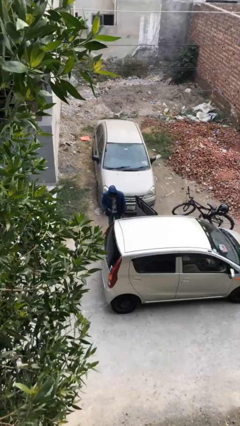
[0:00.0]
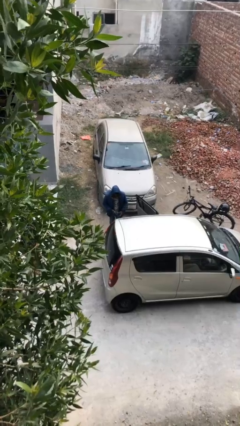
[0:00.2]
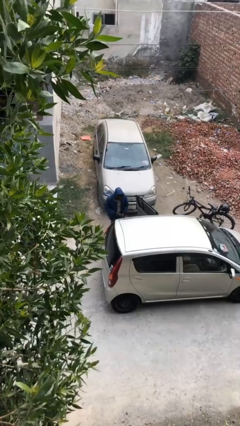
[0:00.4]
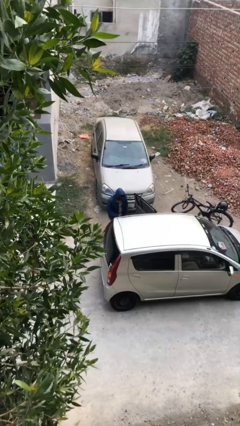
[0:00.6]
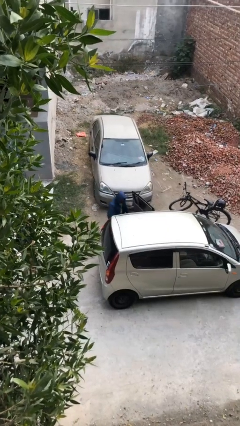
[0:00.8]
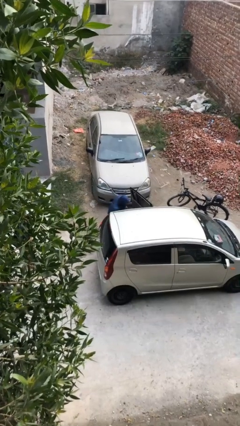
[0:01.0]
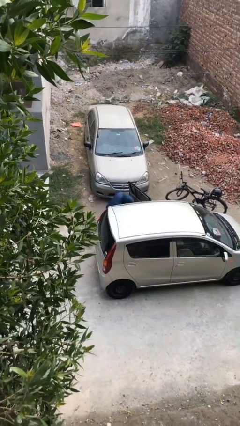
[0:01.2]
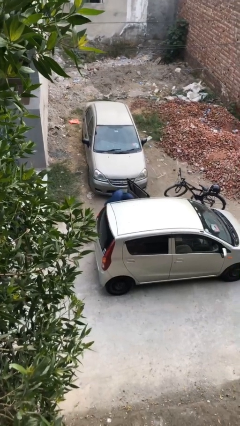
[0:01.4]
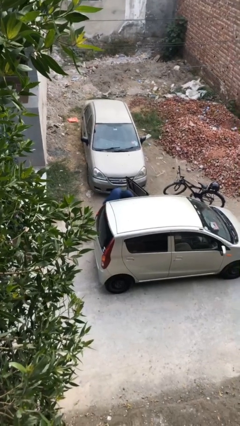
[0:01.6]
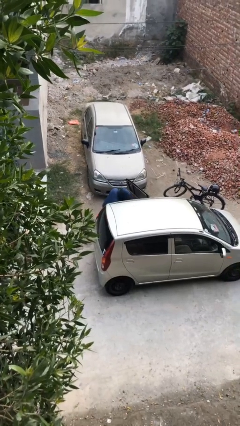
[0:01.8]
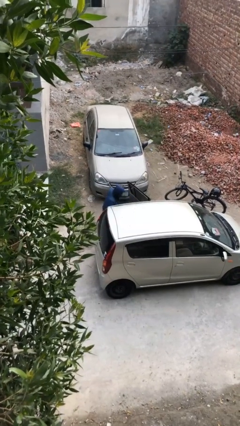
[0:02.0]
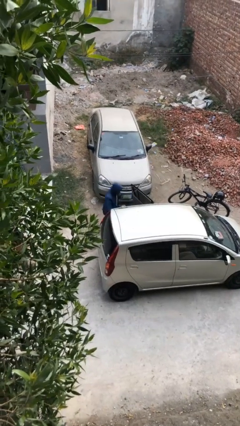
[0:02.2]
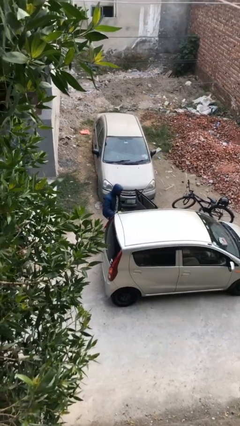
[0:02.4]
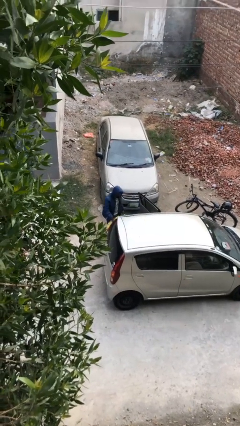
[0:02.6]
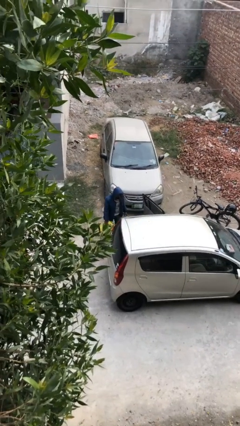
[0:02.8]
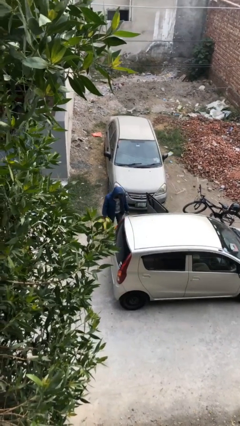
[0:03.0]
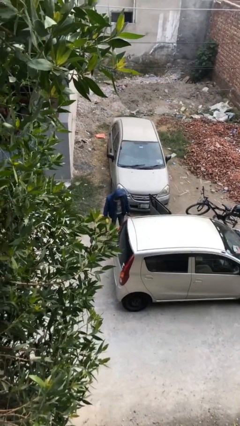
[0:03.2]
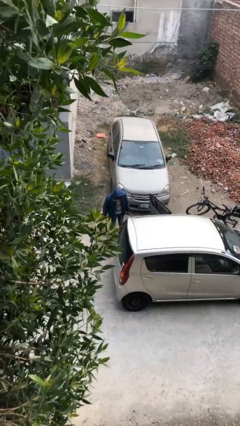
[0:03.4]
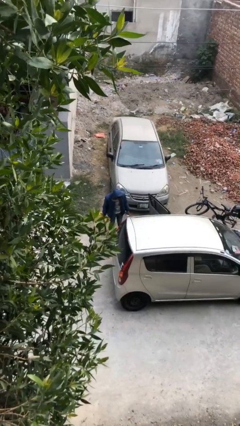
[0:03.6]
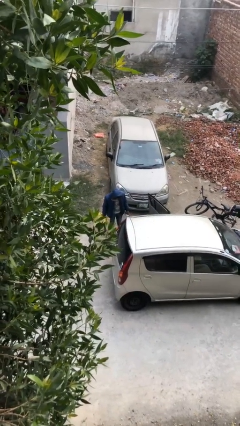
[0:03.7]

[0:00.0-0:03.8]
person unloads car

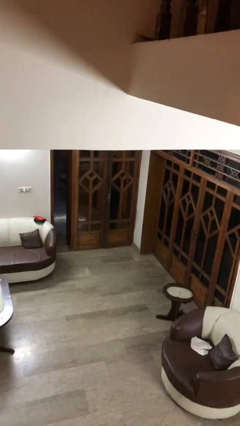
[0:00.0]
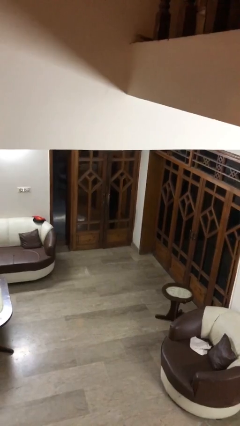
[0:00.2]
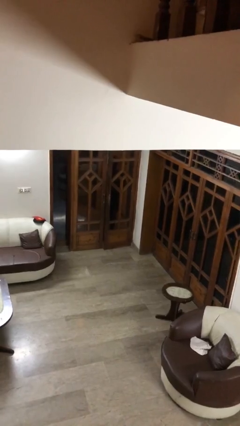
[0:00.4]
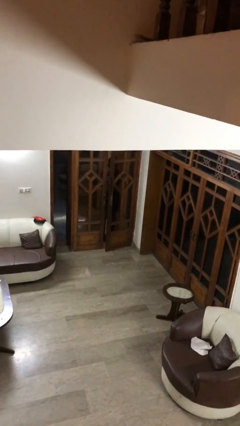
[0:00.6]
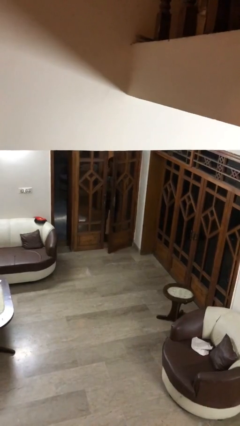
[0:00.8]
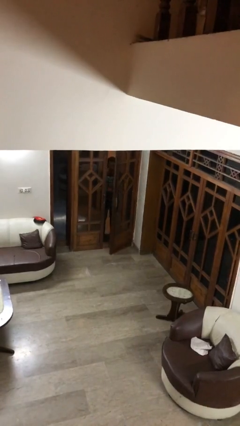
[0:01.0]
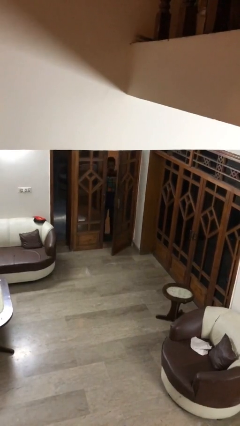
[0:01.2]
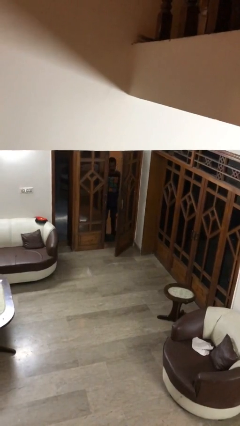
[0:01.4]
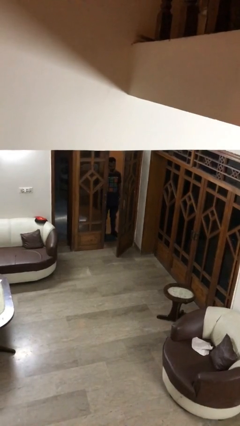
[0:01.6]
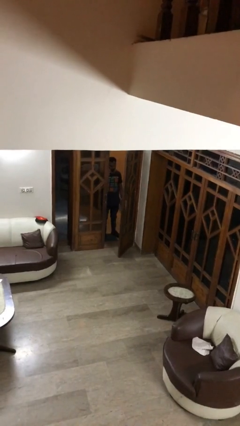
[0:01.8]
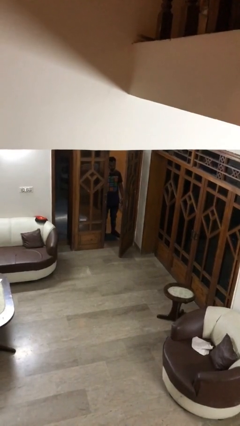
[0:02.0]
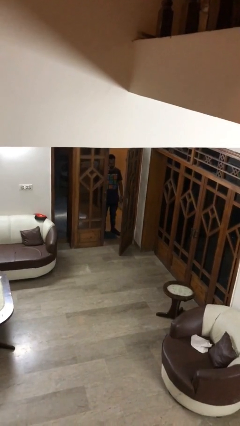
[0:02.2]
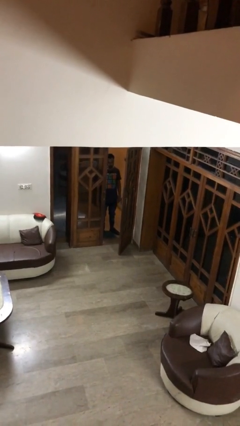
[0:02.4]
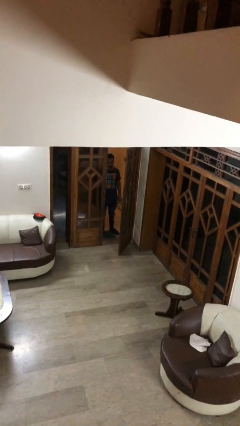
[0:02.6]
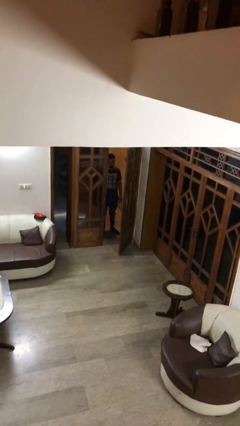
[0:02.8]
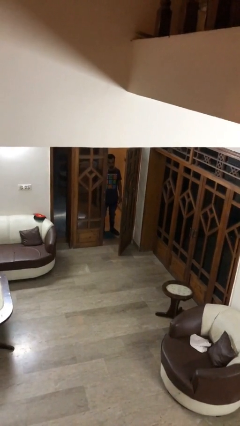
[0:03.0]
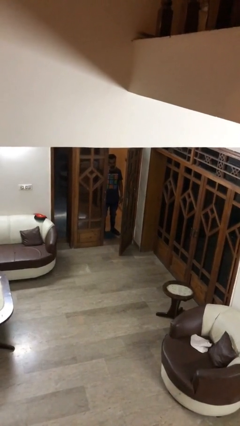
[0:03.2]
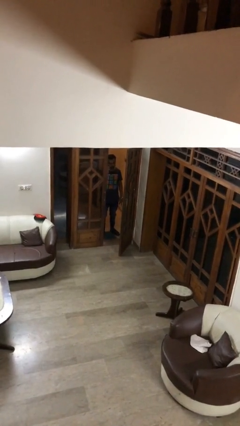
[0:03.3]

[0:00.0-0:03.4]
person opens facility door

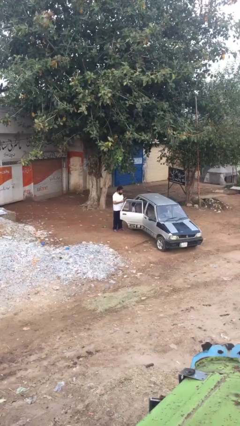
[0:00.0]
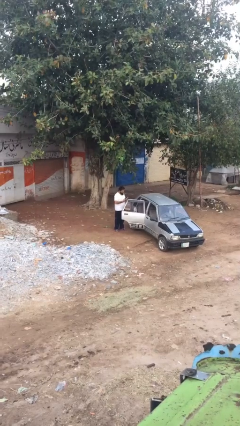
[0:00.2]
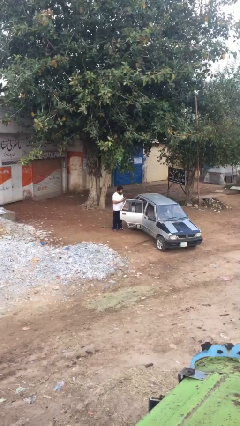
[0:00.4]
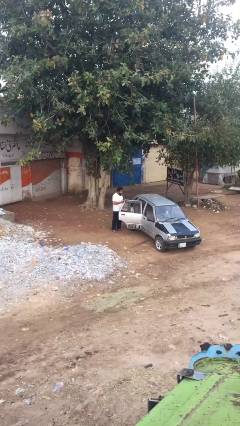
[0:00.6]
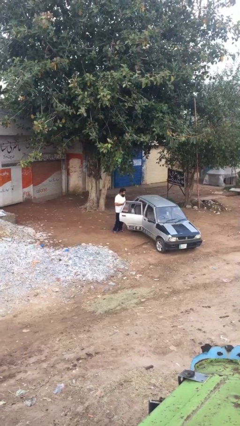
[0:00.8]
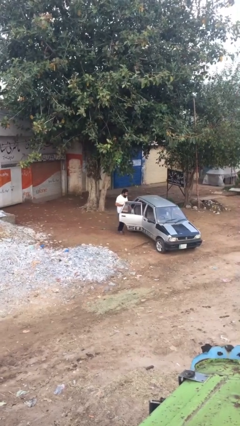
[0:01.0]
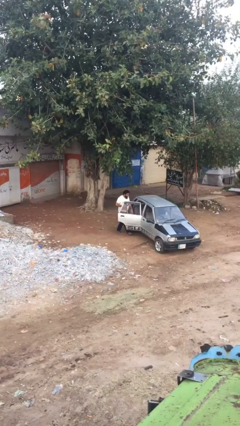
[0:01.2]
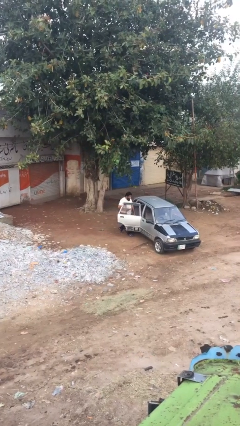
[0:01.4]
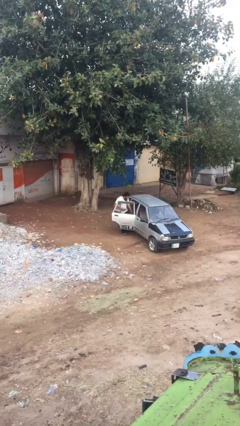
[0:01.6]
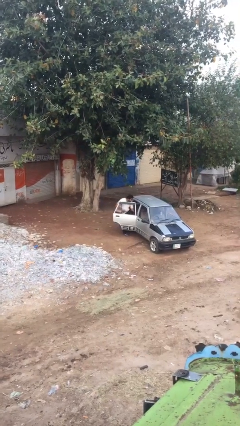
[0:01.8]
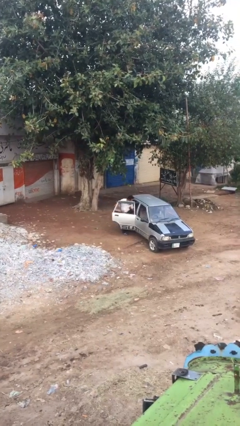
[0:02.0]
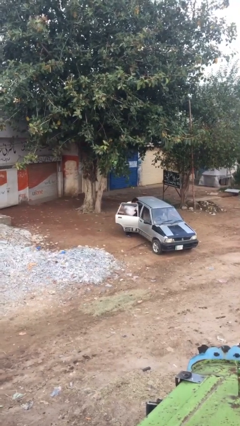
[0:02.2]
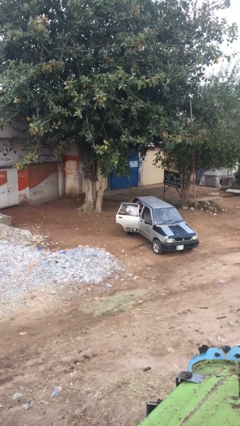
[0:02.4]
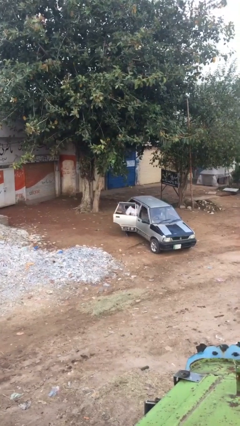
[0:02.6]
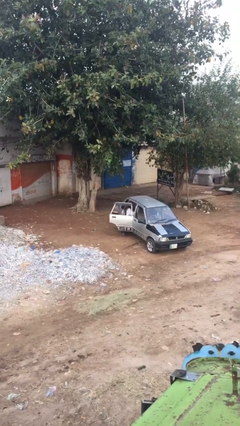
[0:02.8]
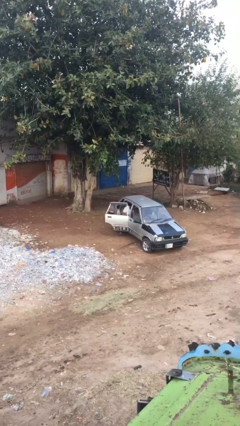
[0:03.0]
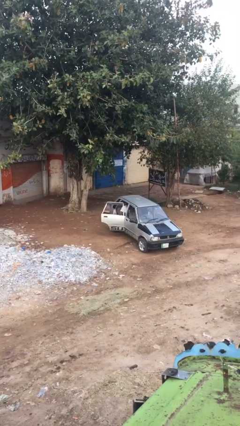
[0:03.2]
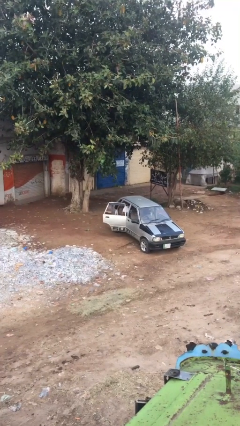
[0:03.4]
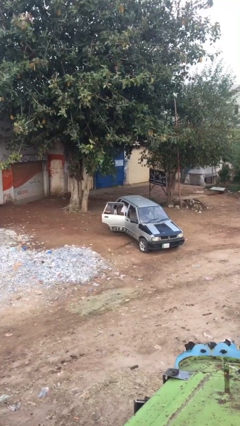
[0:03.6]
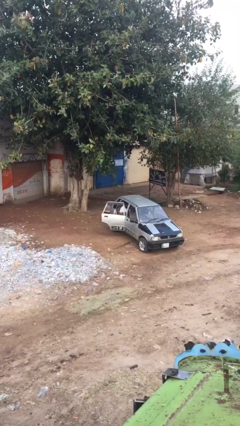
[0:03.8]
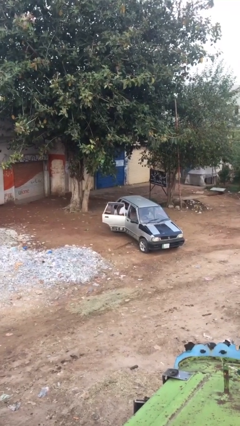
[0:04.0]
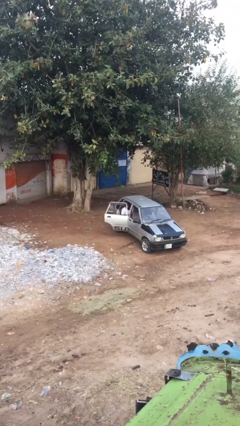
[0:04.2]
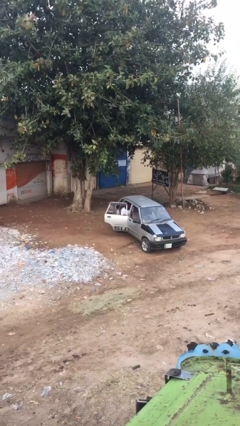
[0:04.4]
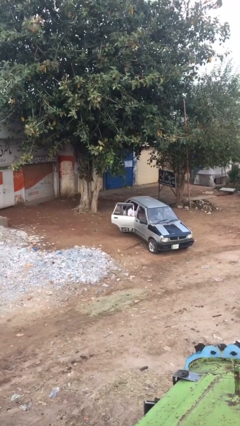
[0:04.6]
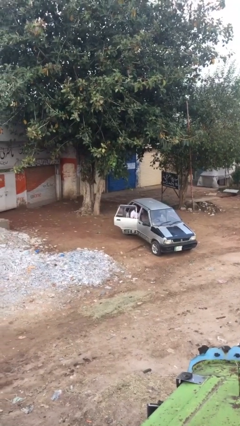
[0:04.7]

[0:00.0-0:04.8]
person enters car

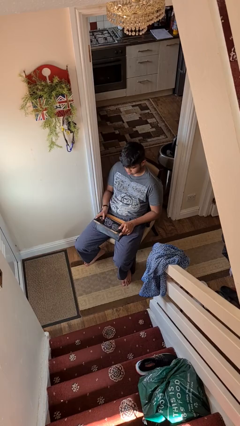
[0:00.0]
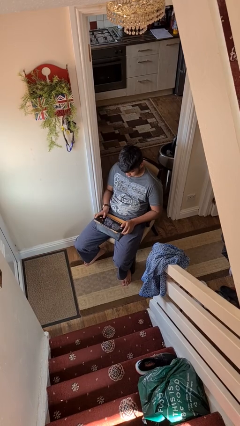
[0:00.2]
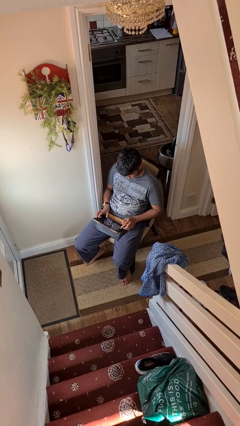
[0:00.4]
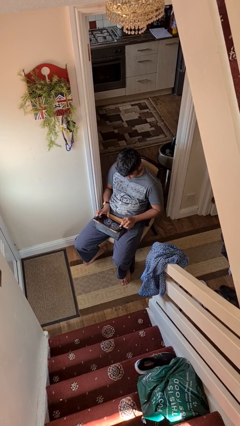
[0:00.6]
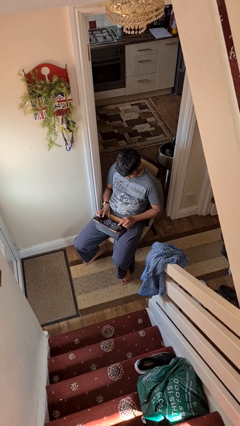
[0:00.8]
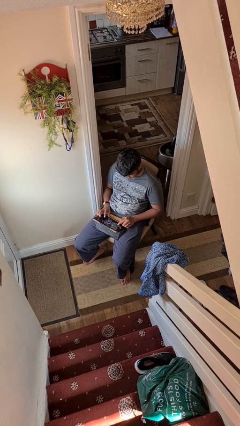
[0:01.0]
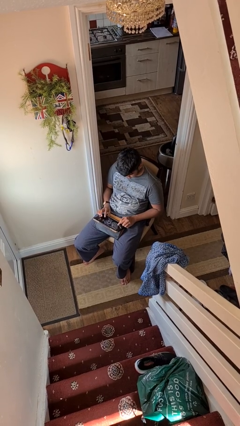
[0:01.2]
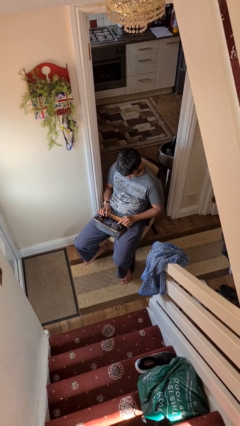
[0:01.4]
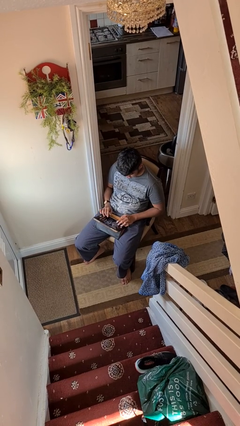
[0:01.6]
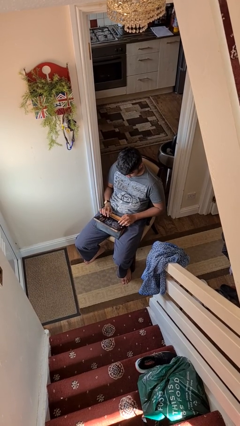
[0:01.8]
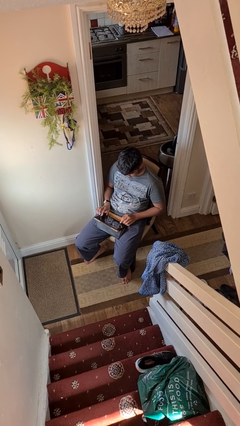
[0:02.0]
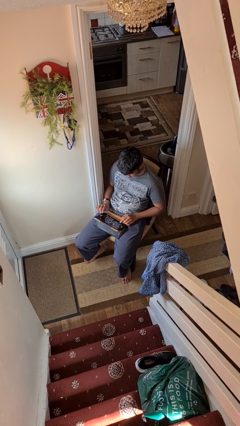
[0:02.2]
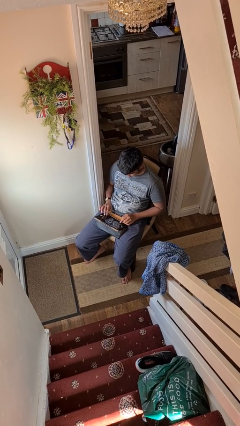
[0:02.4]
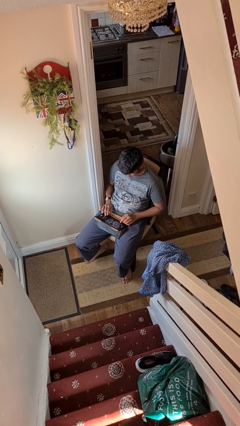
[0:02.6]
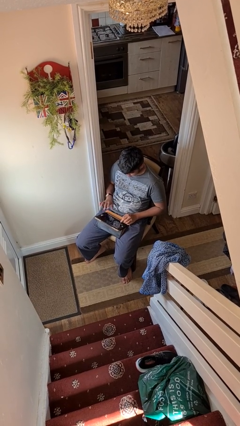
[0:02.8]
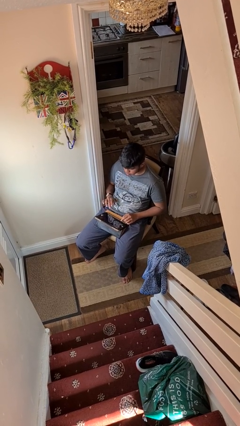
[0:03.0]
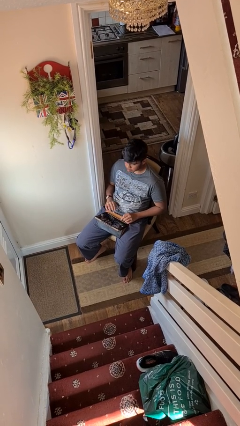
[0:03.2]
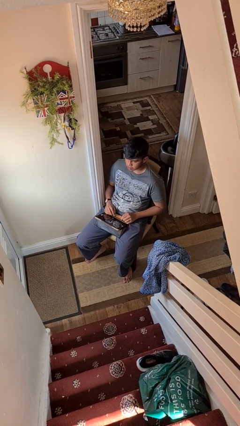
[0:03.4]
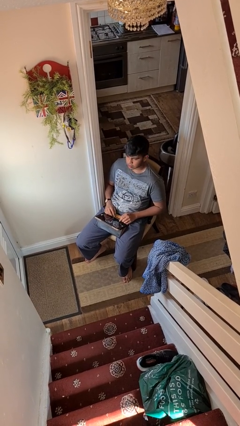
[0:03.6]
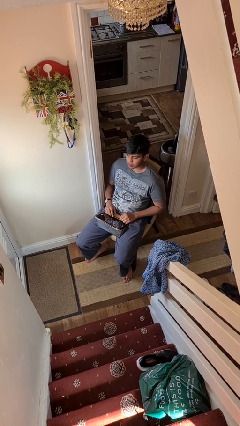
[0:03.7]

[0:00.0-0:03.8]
person interacts with tablet

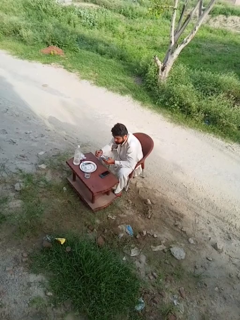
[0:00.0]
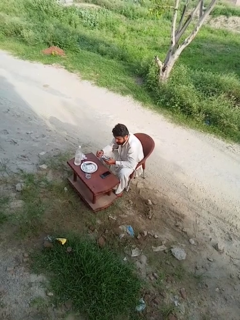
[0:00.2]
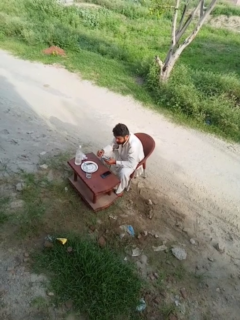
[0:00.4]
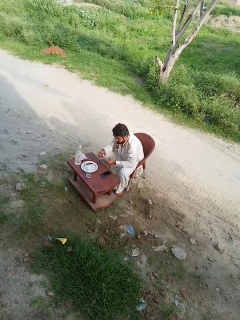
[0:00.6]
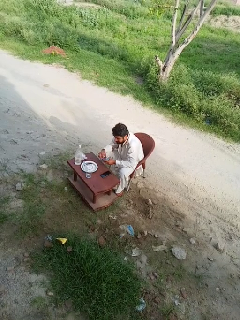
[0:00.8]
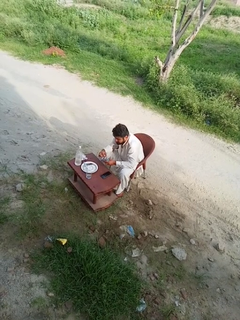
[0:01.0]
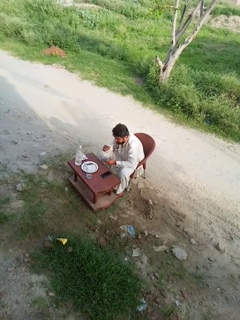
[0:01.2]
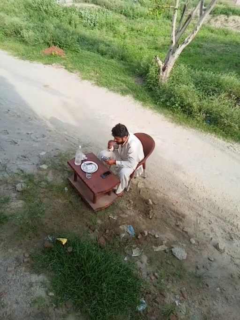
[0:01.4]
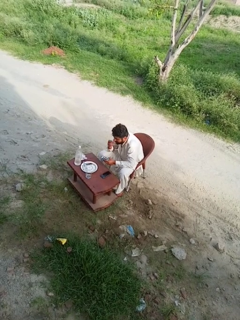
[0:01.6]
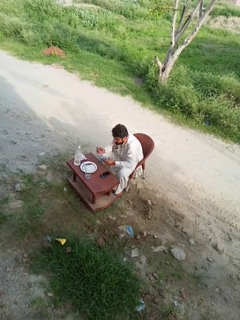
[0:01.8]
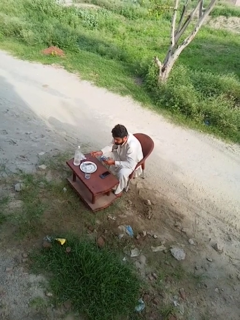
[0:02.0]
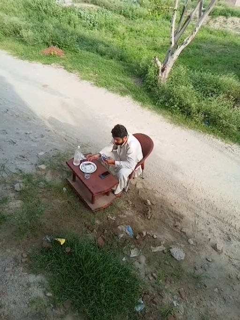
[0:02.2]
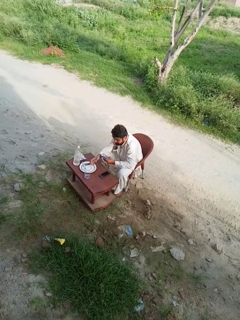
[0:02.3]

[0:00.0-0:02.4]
person eats with hands
